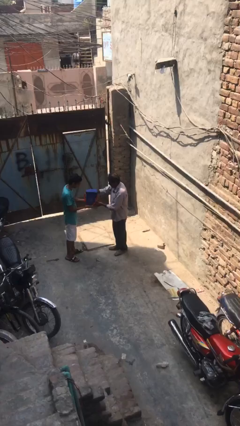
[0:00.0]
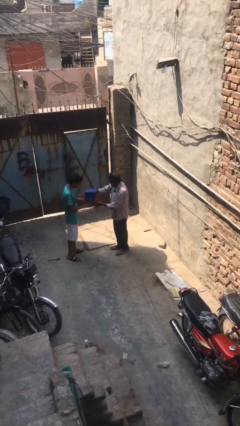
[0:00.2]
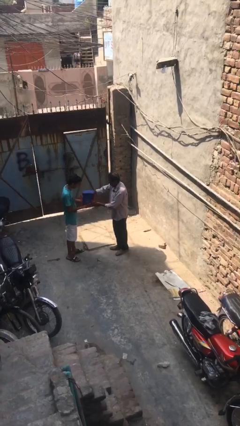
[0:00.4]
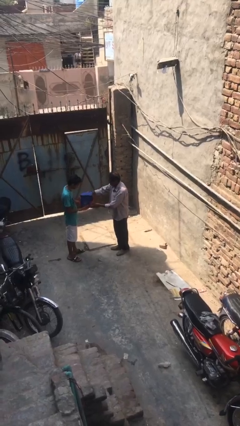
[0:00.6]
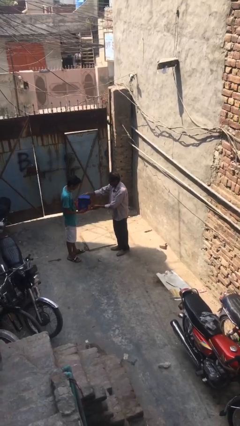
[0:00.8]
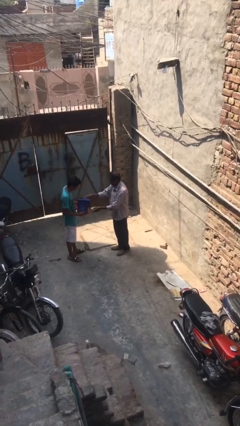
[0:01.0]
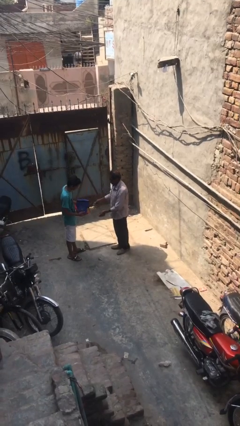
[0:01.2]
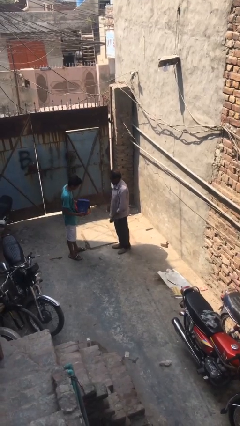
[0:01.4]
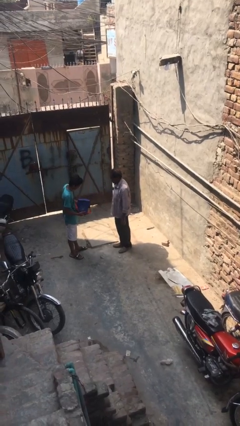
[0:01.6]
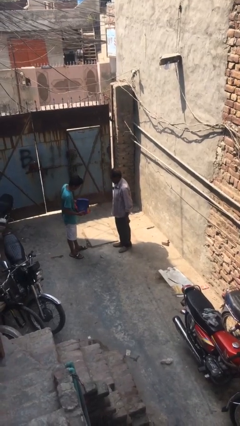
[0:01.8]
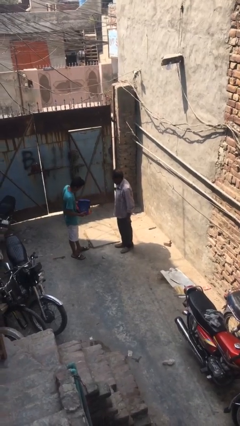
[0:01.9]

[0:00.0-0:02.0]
person transfers object to person

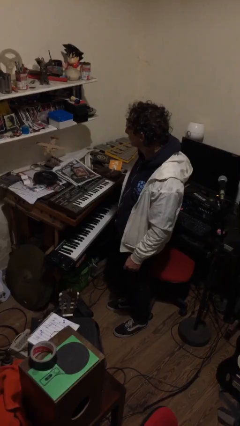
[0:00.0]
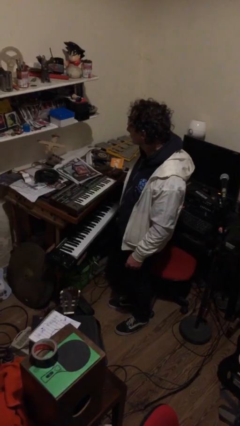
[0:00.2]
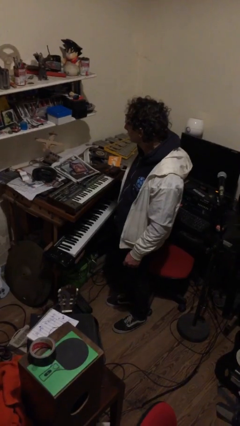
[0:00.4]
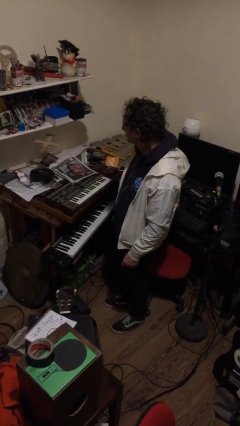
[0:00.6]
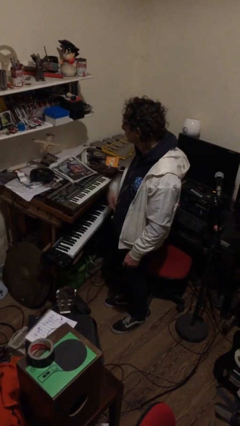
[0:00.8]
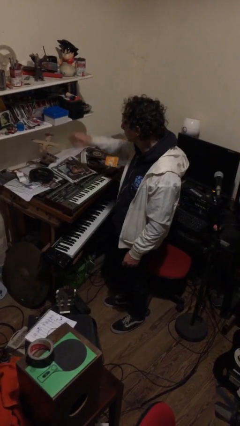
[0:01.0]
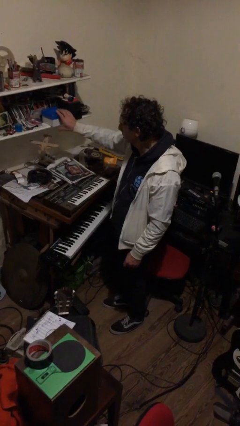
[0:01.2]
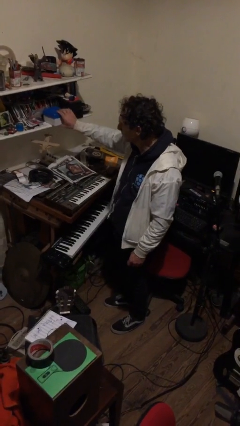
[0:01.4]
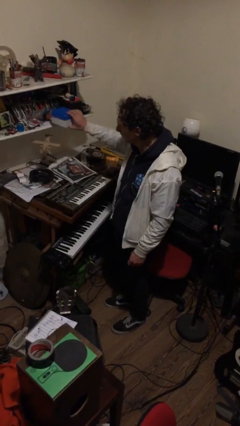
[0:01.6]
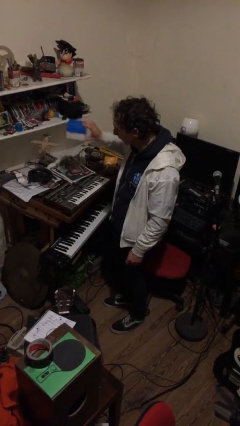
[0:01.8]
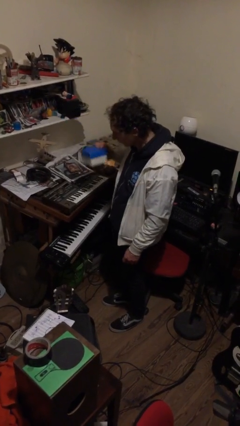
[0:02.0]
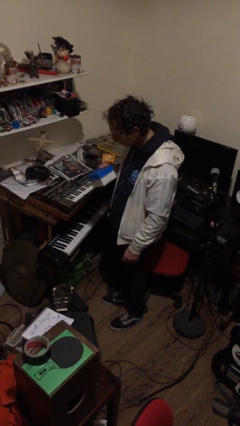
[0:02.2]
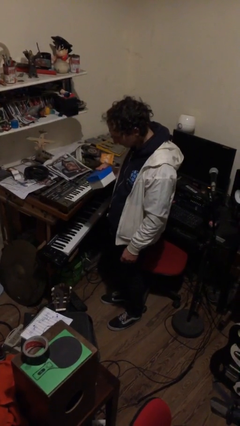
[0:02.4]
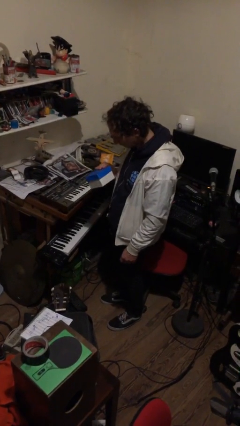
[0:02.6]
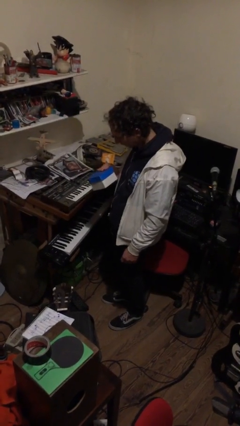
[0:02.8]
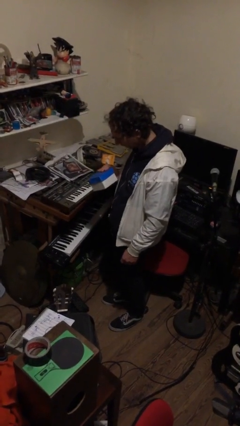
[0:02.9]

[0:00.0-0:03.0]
person picks up object from countertop

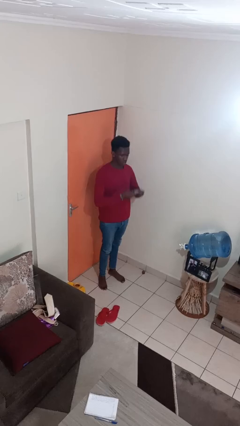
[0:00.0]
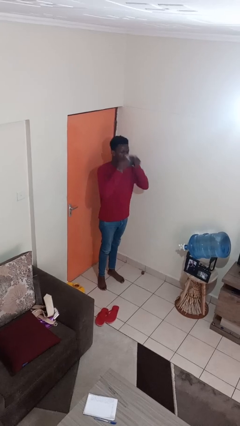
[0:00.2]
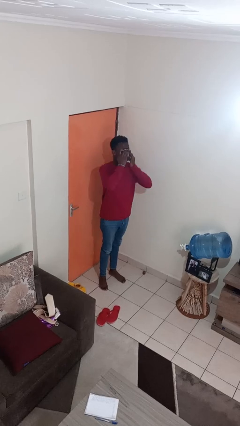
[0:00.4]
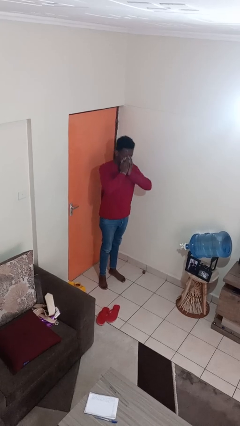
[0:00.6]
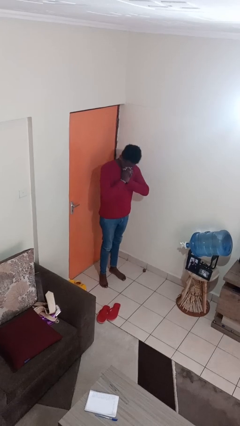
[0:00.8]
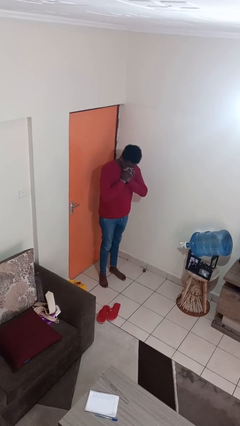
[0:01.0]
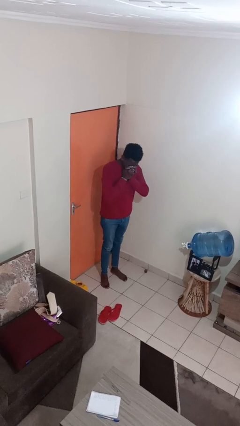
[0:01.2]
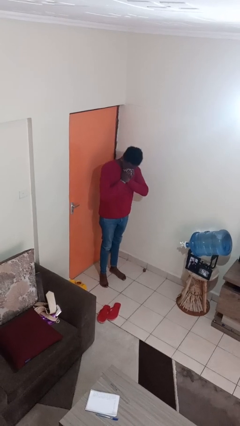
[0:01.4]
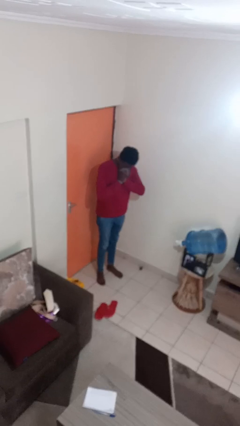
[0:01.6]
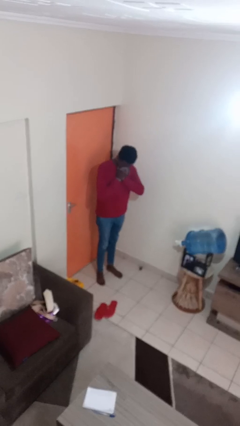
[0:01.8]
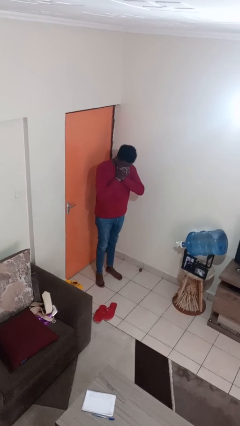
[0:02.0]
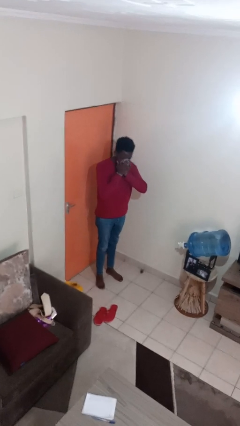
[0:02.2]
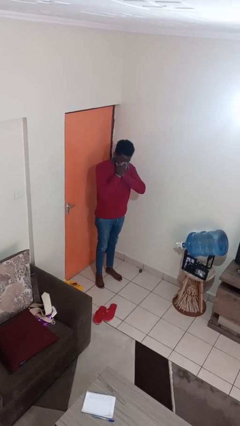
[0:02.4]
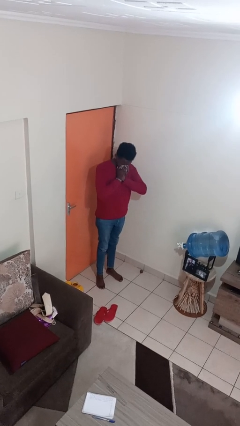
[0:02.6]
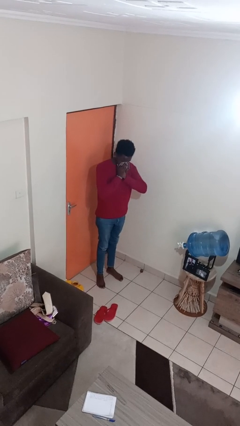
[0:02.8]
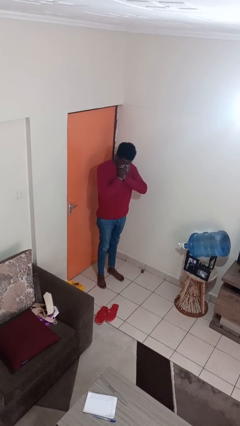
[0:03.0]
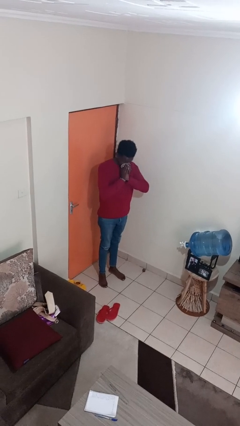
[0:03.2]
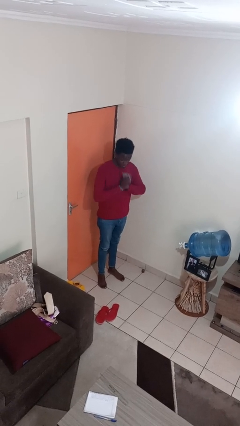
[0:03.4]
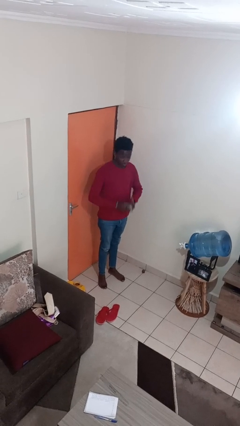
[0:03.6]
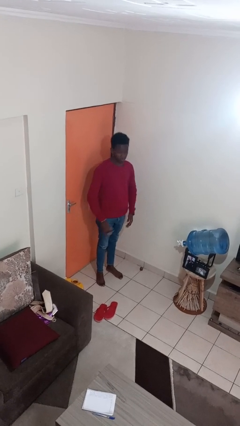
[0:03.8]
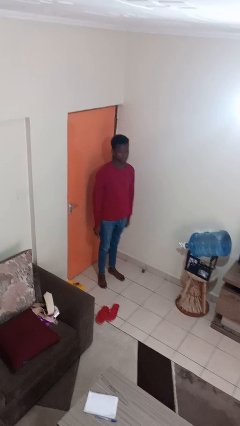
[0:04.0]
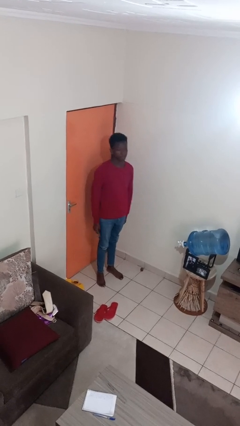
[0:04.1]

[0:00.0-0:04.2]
person blows nose

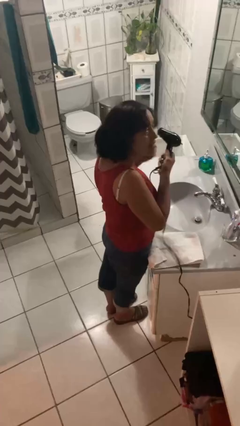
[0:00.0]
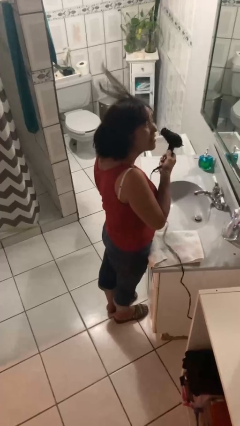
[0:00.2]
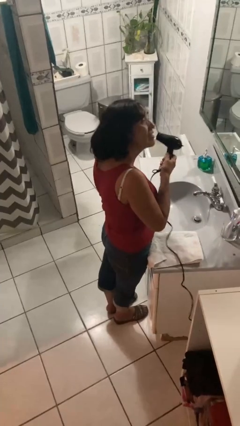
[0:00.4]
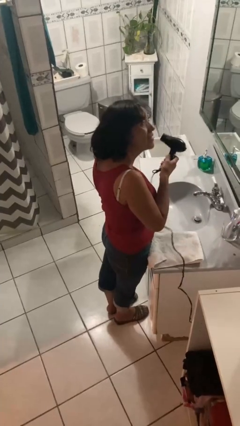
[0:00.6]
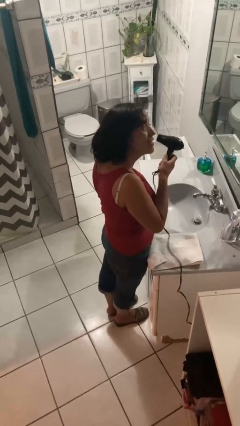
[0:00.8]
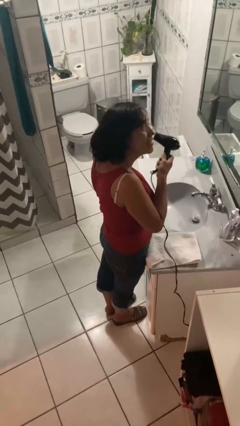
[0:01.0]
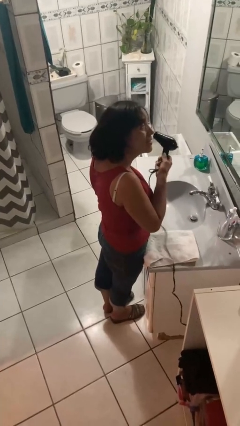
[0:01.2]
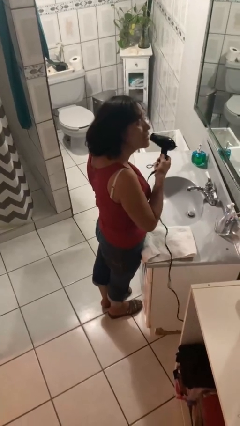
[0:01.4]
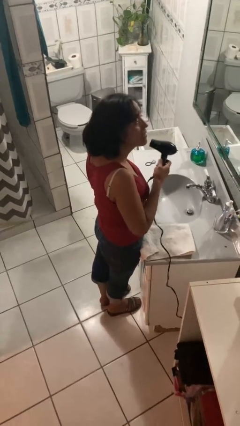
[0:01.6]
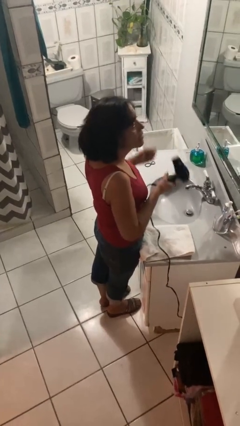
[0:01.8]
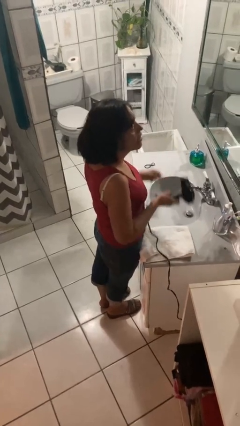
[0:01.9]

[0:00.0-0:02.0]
person dries hair with hairdryer

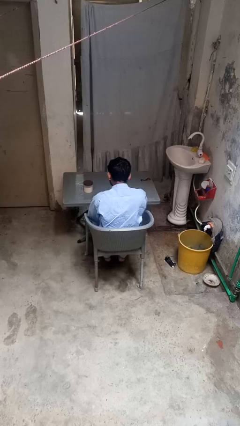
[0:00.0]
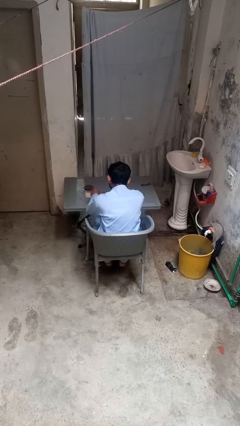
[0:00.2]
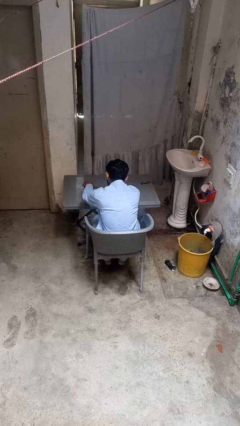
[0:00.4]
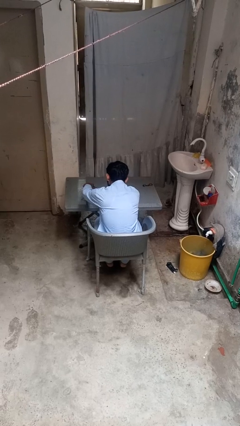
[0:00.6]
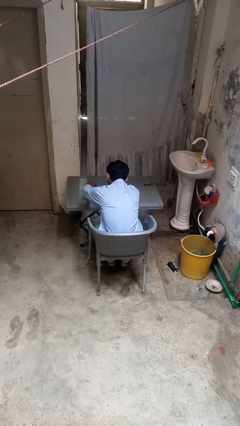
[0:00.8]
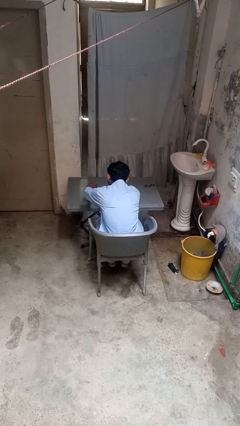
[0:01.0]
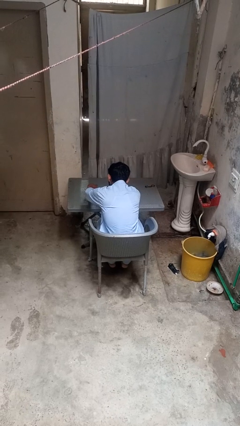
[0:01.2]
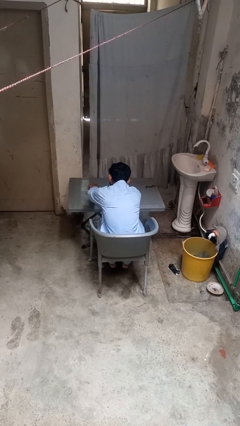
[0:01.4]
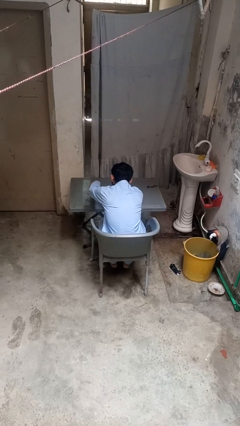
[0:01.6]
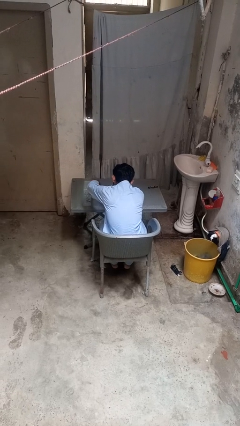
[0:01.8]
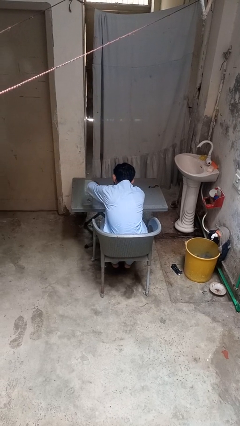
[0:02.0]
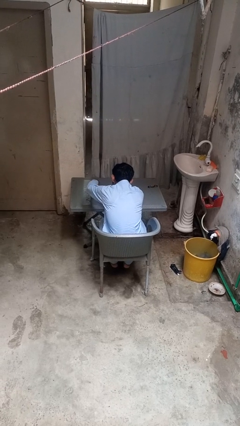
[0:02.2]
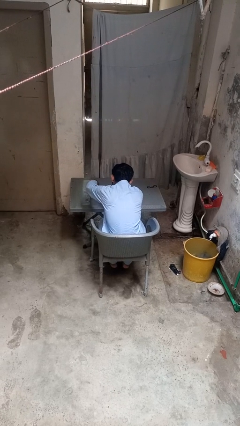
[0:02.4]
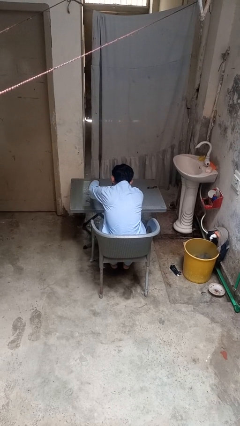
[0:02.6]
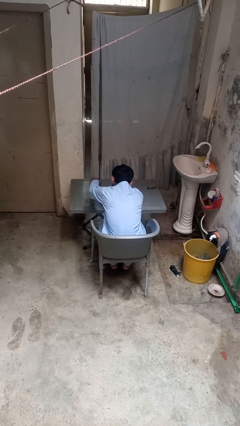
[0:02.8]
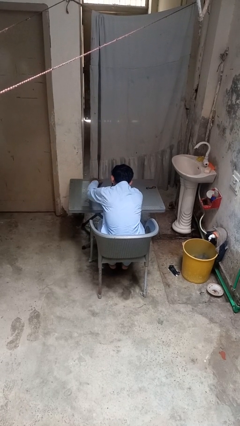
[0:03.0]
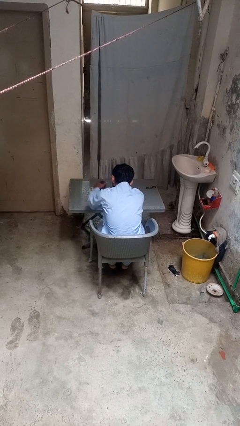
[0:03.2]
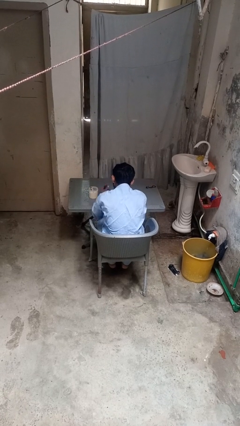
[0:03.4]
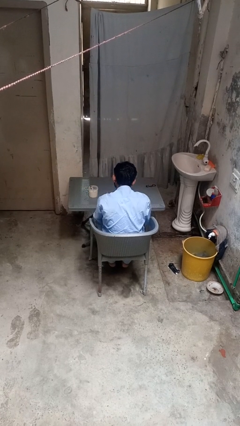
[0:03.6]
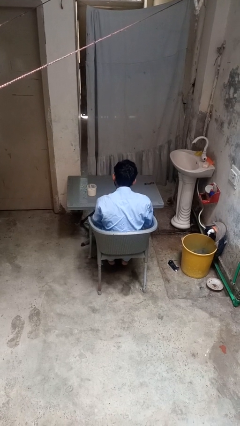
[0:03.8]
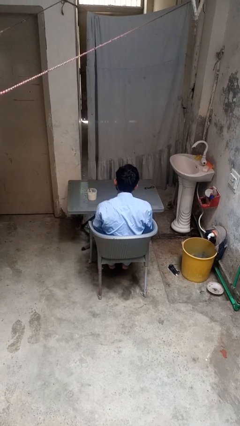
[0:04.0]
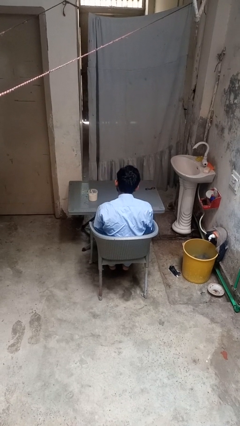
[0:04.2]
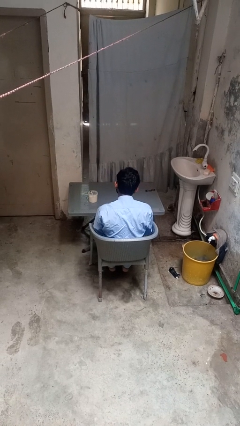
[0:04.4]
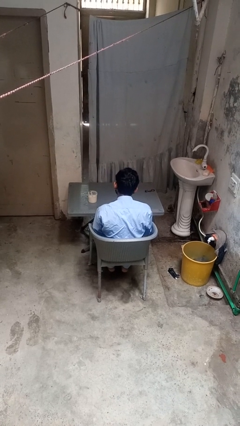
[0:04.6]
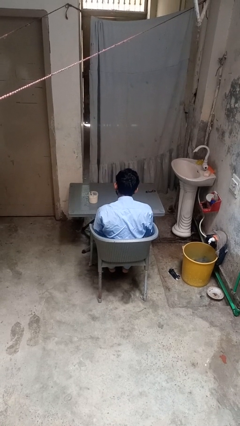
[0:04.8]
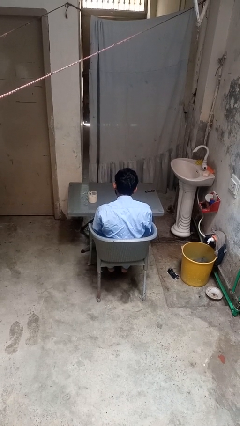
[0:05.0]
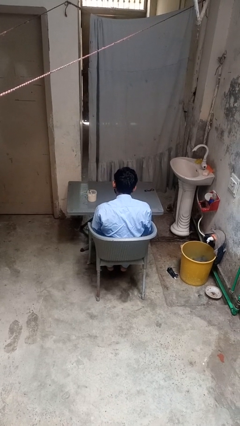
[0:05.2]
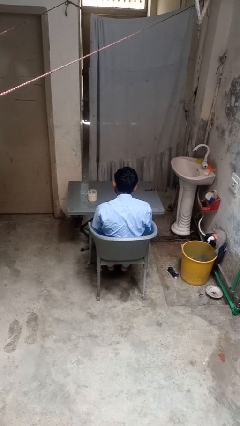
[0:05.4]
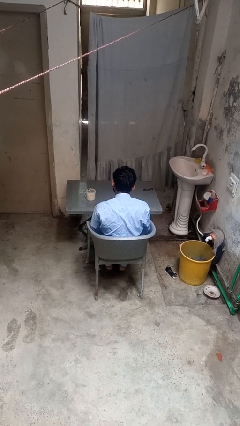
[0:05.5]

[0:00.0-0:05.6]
person opens jar

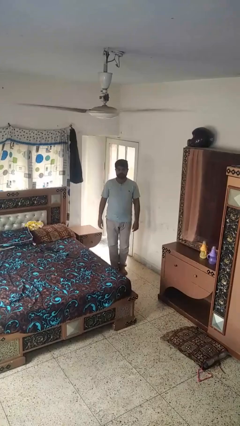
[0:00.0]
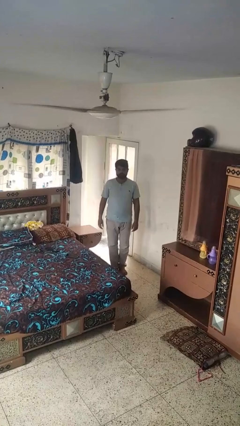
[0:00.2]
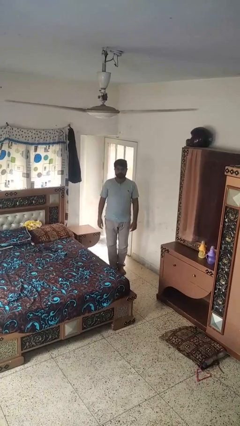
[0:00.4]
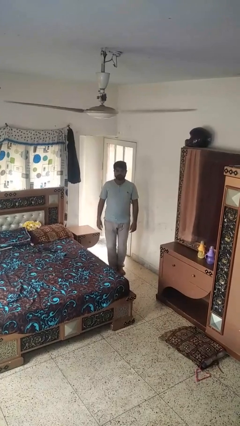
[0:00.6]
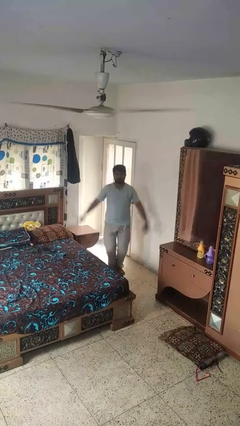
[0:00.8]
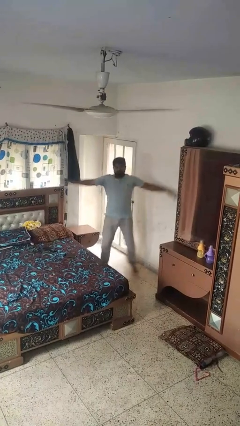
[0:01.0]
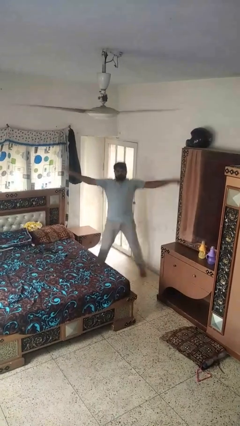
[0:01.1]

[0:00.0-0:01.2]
person exercises with jumping jacks
